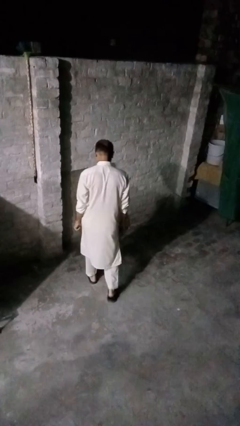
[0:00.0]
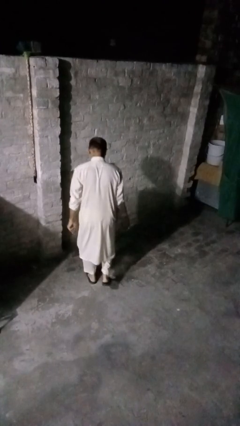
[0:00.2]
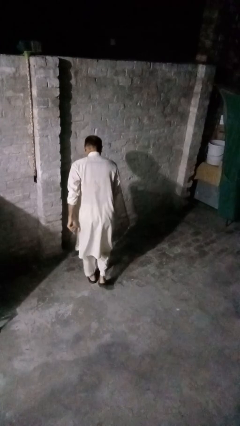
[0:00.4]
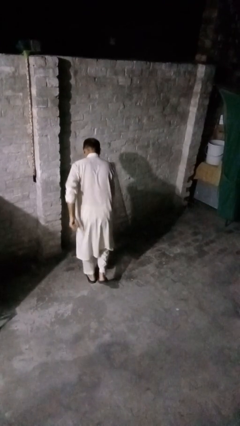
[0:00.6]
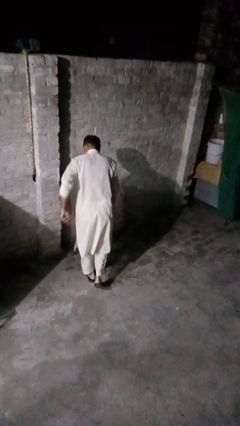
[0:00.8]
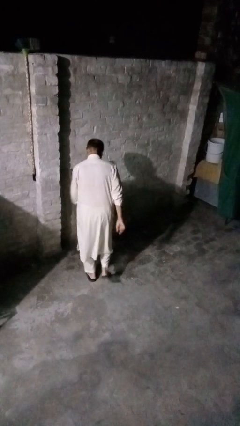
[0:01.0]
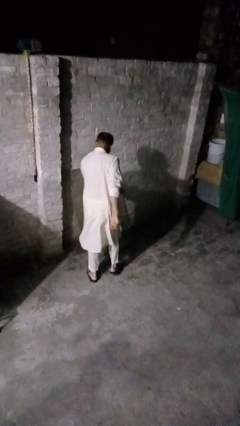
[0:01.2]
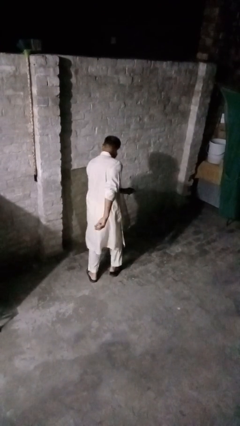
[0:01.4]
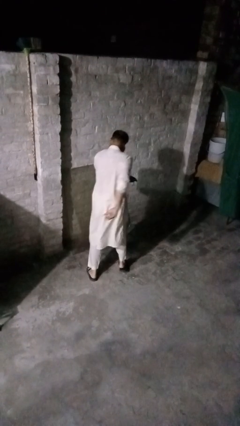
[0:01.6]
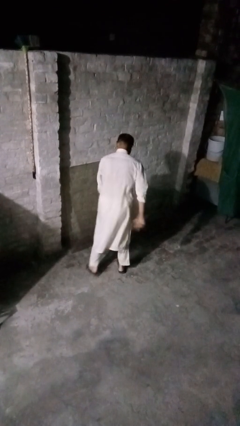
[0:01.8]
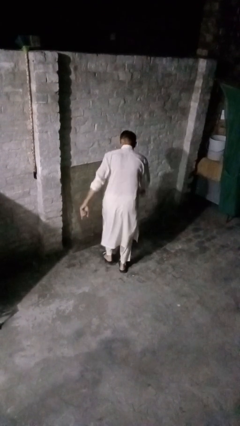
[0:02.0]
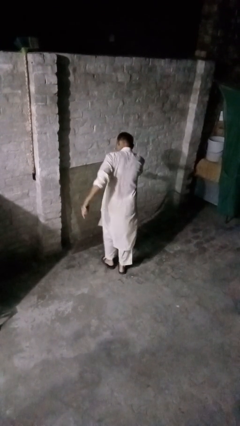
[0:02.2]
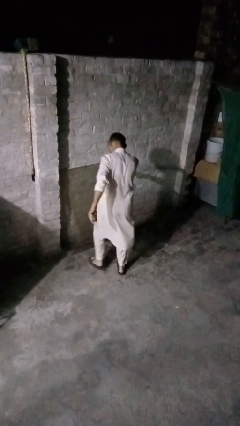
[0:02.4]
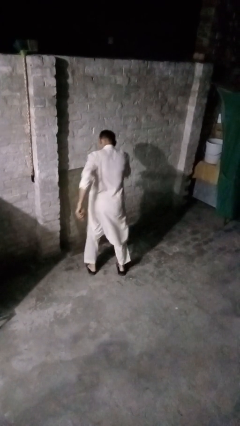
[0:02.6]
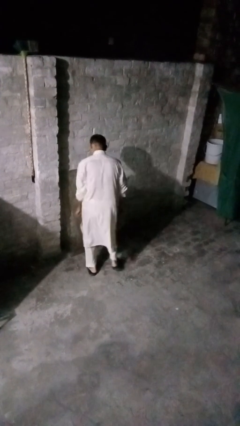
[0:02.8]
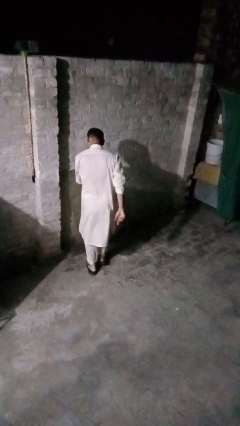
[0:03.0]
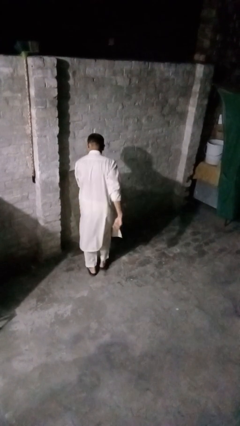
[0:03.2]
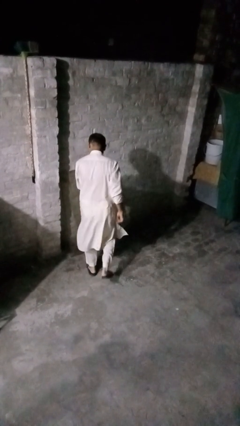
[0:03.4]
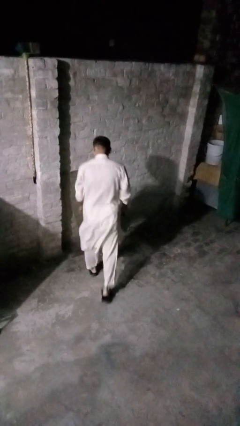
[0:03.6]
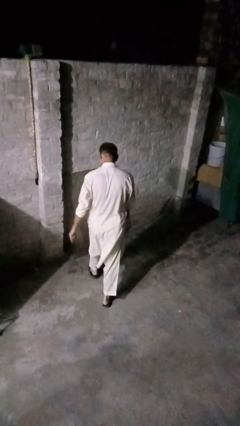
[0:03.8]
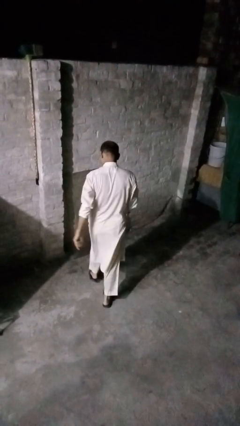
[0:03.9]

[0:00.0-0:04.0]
person dances in place

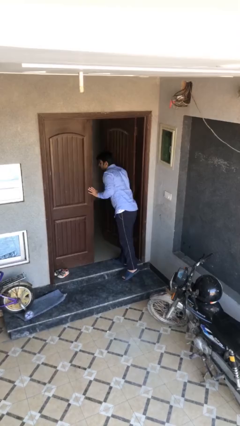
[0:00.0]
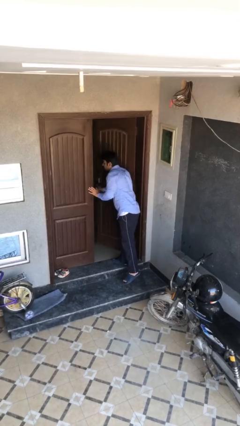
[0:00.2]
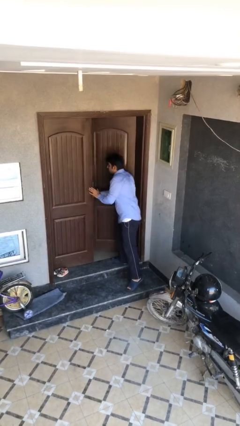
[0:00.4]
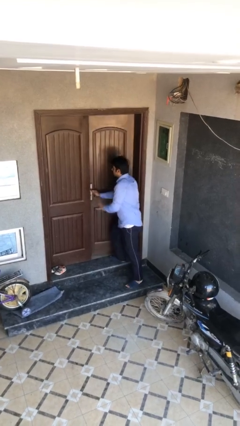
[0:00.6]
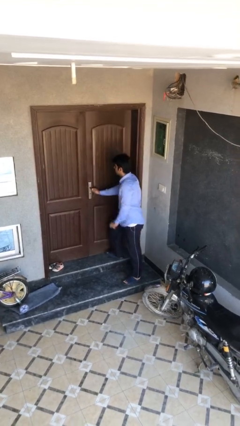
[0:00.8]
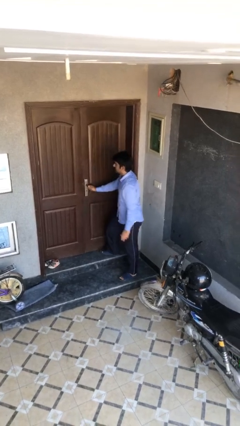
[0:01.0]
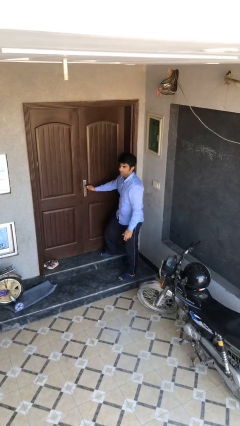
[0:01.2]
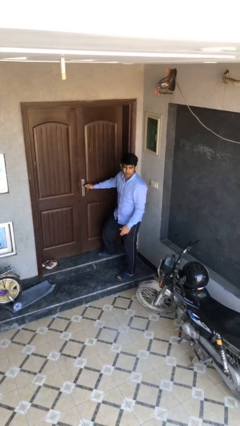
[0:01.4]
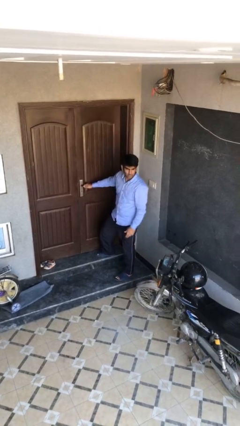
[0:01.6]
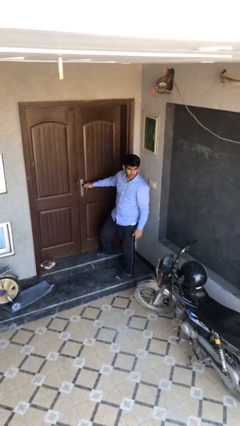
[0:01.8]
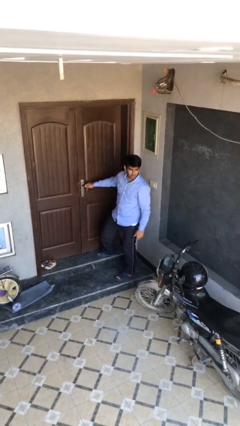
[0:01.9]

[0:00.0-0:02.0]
person closes facility door

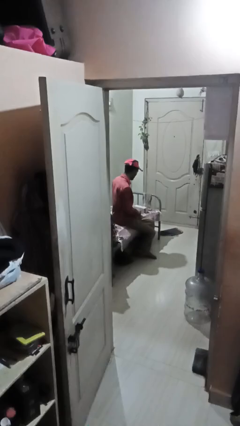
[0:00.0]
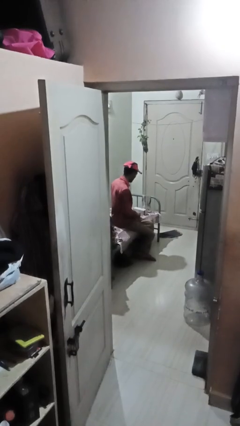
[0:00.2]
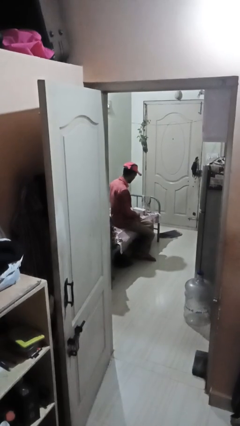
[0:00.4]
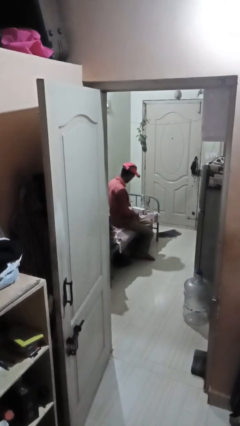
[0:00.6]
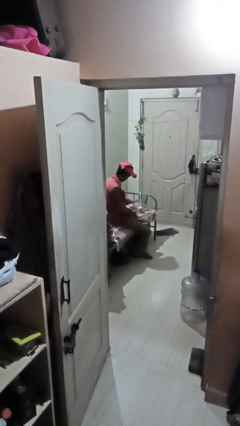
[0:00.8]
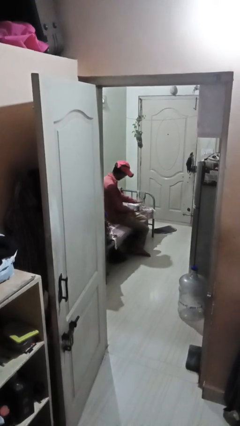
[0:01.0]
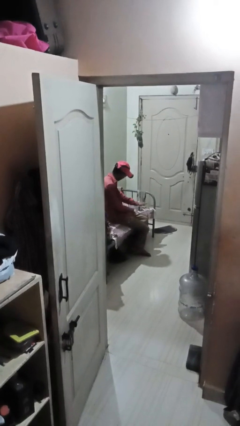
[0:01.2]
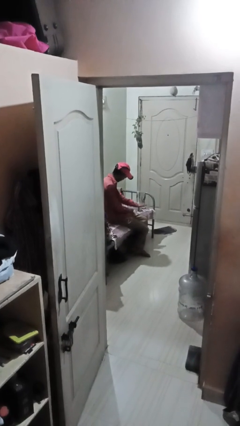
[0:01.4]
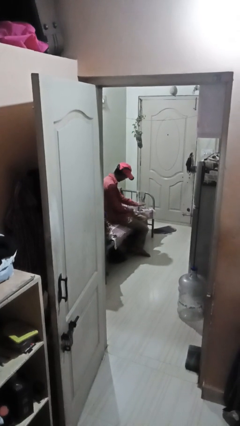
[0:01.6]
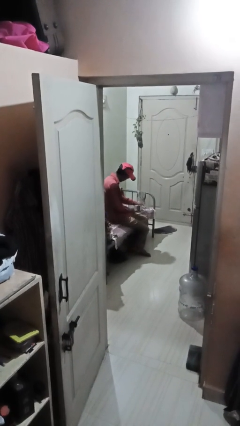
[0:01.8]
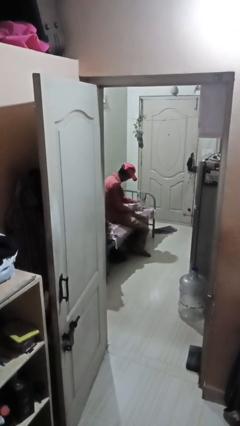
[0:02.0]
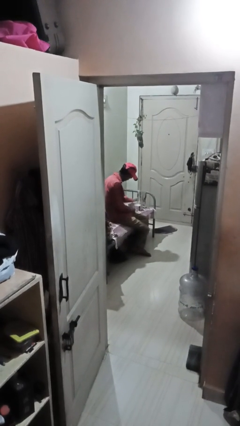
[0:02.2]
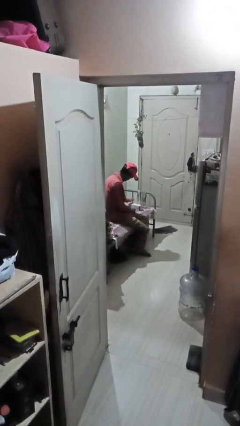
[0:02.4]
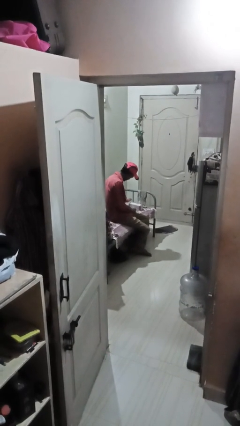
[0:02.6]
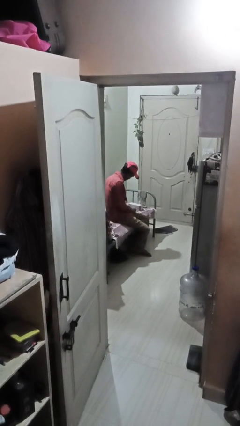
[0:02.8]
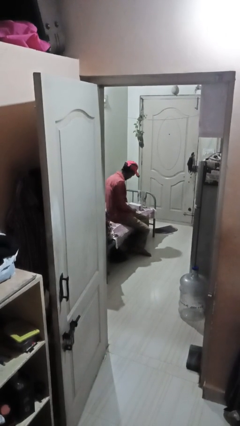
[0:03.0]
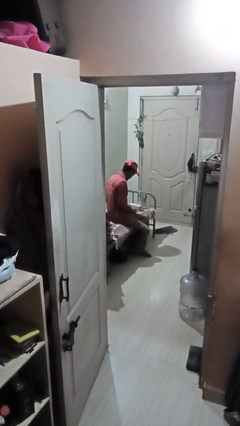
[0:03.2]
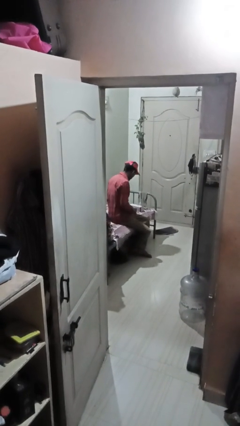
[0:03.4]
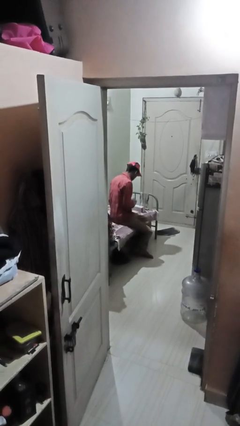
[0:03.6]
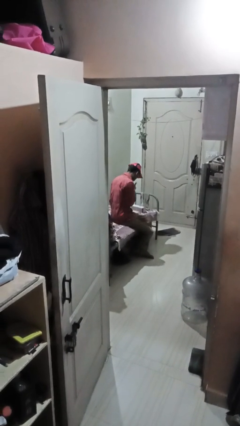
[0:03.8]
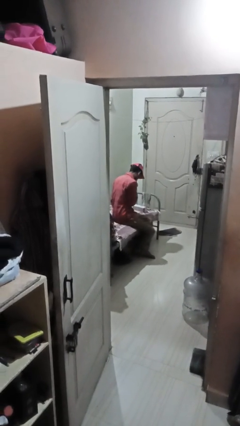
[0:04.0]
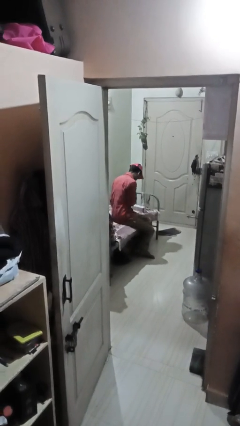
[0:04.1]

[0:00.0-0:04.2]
person waves hand over object

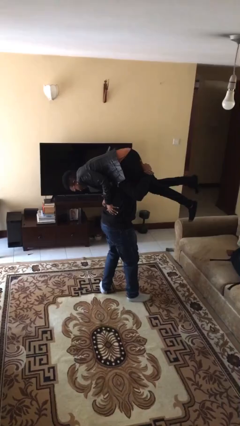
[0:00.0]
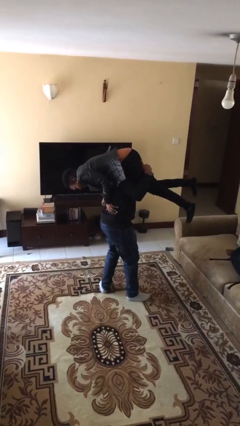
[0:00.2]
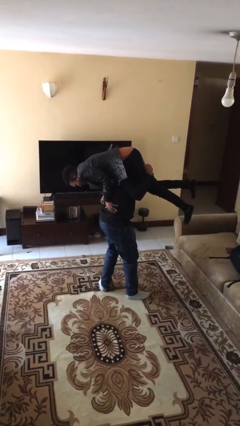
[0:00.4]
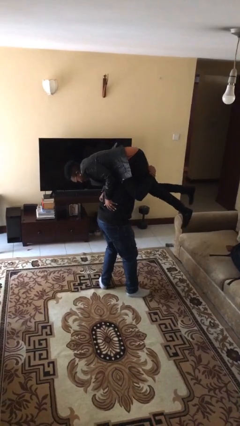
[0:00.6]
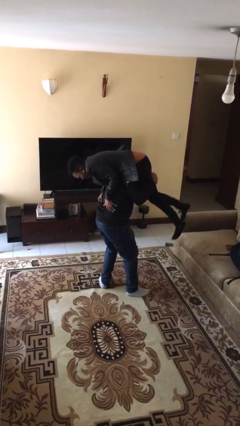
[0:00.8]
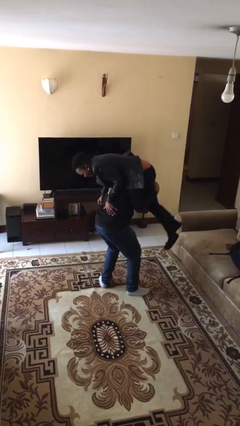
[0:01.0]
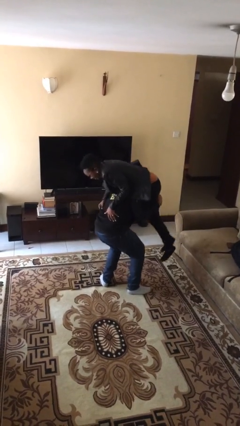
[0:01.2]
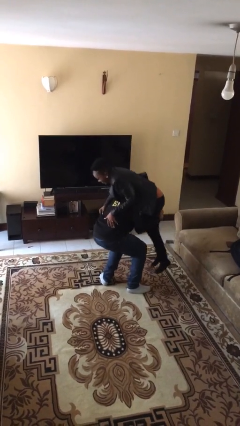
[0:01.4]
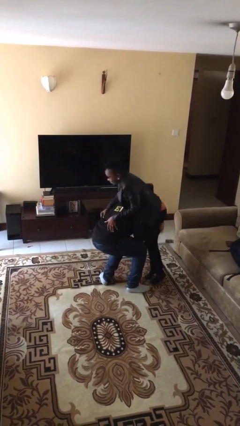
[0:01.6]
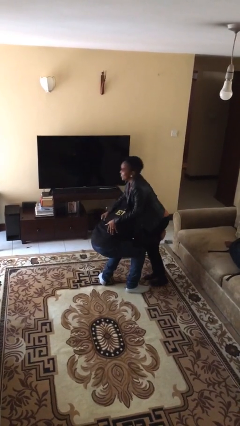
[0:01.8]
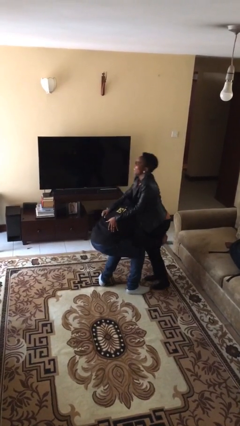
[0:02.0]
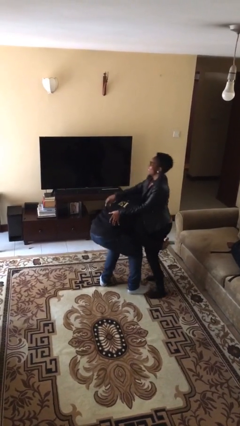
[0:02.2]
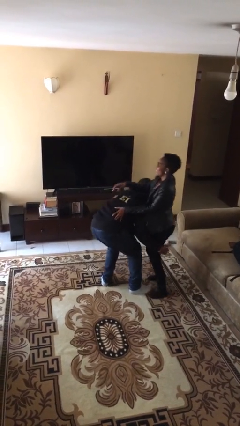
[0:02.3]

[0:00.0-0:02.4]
person puts down person

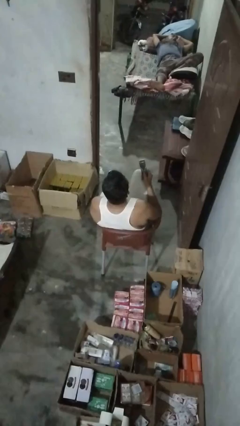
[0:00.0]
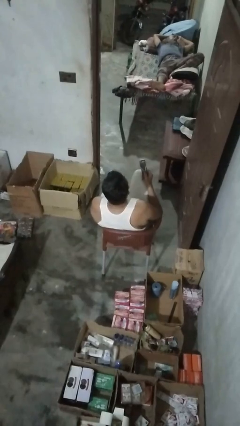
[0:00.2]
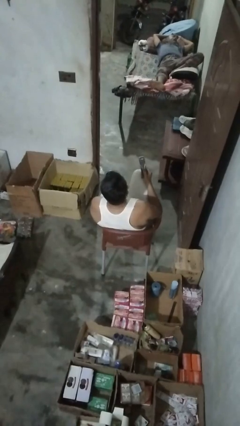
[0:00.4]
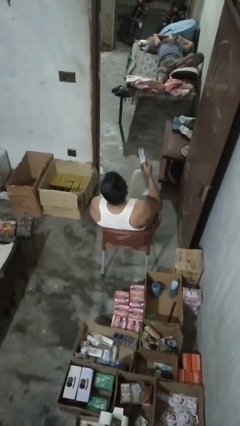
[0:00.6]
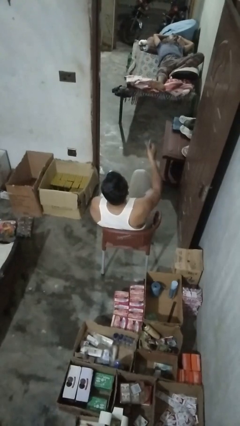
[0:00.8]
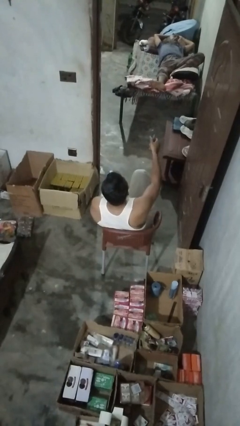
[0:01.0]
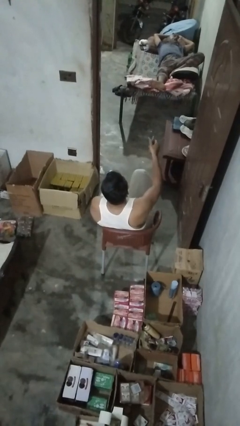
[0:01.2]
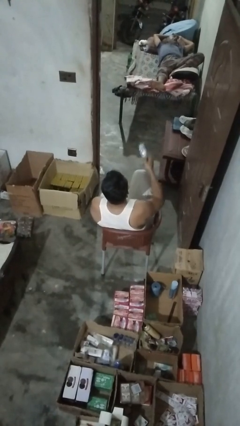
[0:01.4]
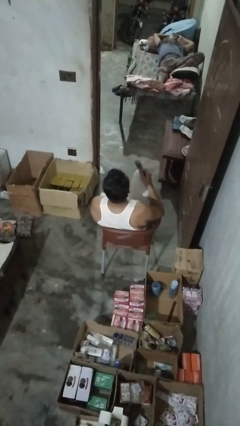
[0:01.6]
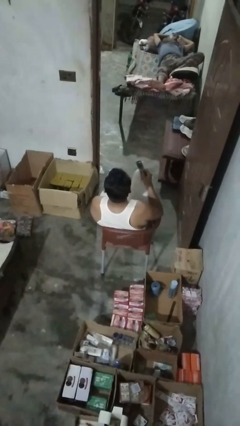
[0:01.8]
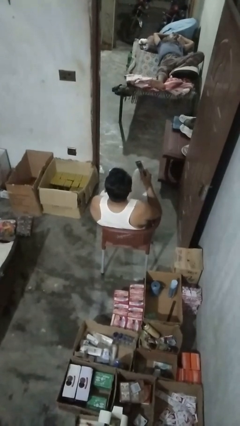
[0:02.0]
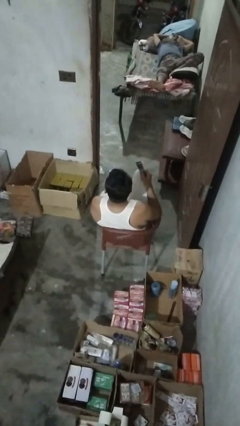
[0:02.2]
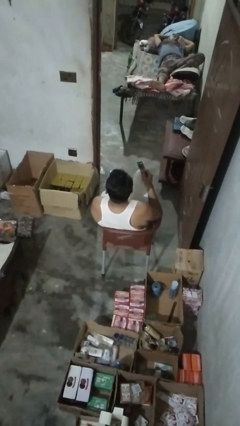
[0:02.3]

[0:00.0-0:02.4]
person uses television remote

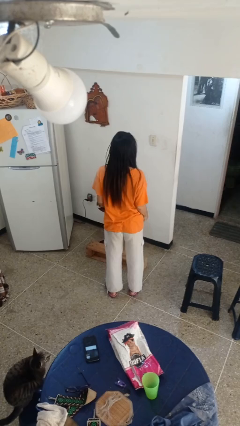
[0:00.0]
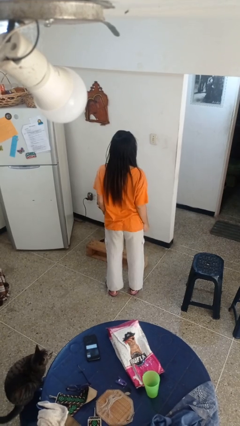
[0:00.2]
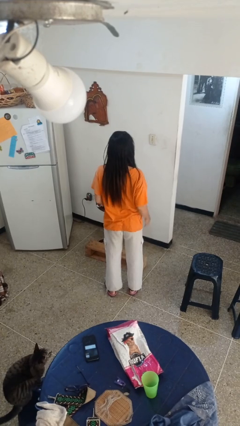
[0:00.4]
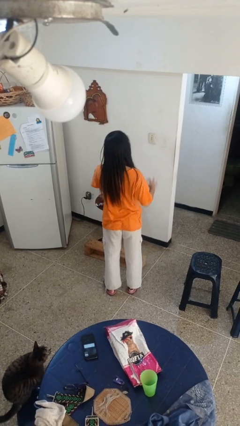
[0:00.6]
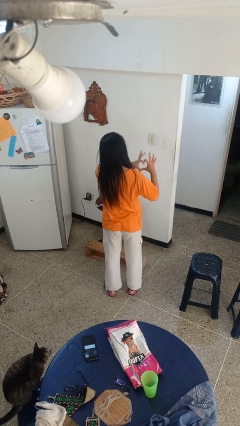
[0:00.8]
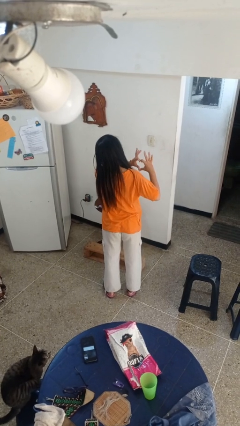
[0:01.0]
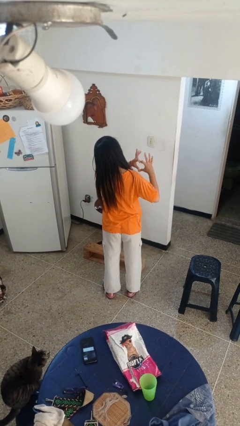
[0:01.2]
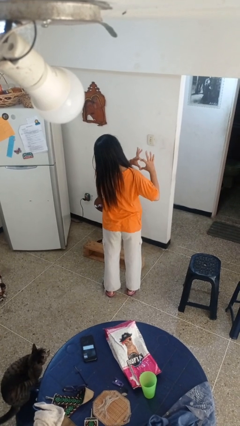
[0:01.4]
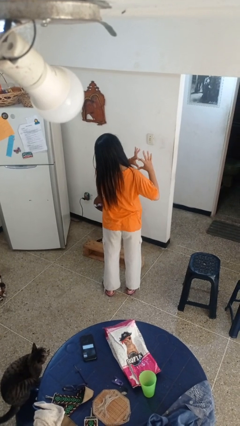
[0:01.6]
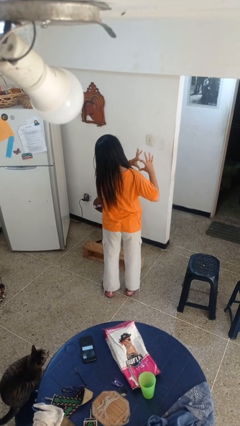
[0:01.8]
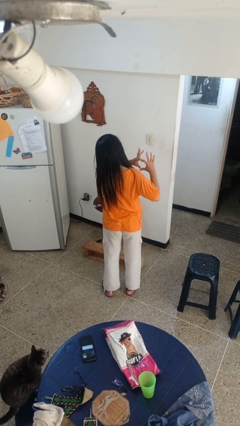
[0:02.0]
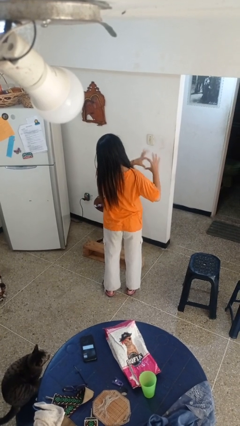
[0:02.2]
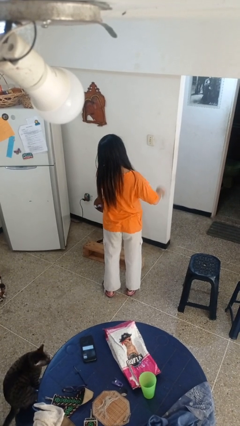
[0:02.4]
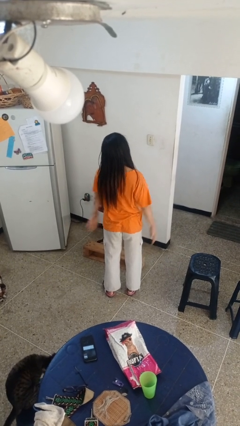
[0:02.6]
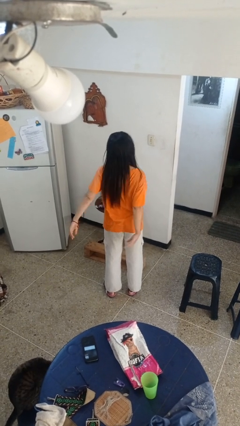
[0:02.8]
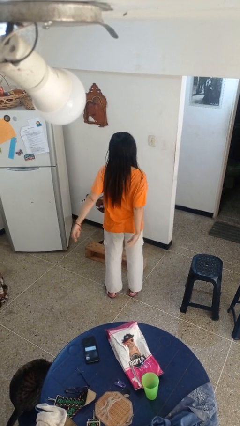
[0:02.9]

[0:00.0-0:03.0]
person gestures heart
